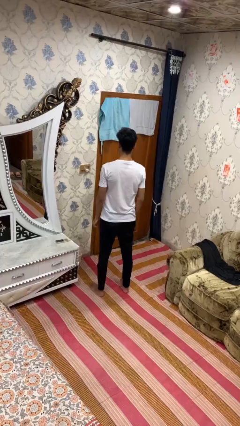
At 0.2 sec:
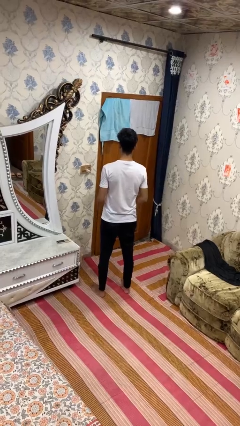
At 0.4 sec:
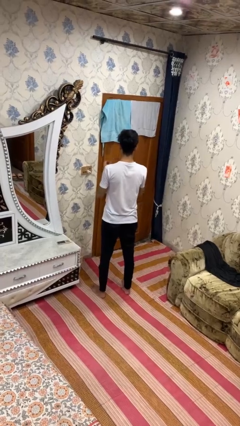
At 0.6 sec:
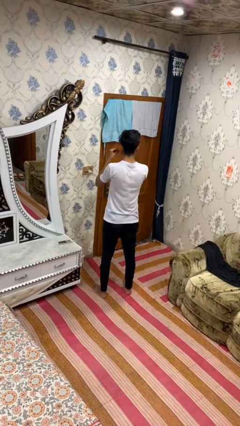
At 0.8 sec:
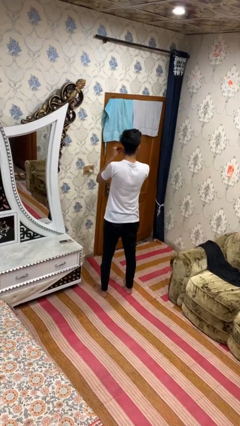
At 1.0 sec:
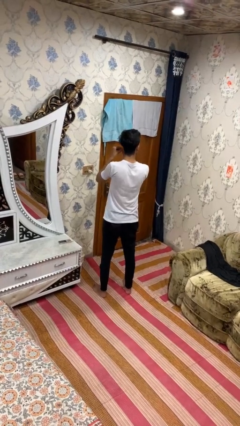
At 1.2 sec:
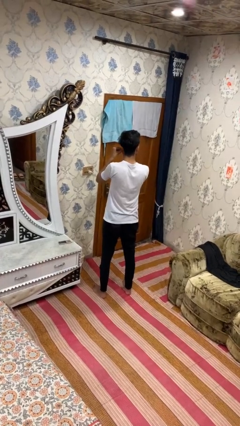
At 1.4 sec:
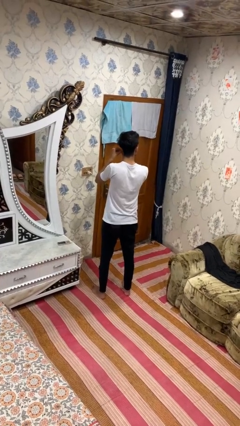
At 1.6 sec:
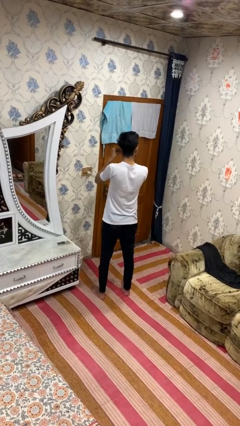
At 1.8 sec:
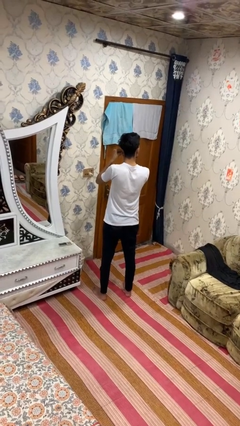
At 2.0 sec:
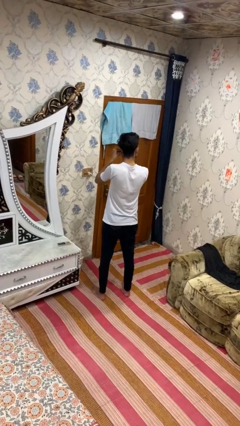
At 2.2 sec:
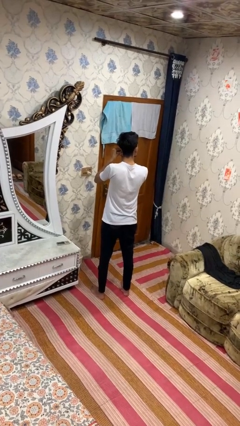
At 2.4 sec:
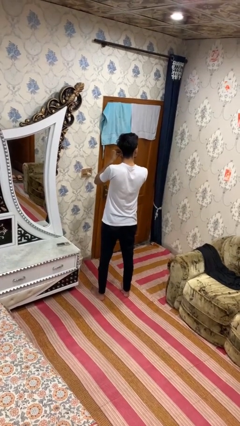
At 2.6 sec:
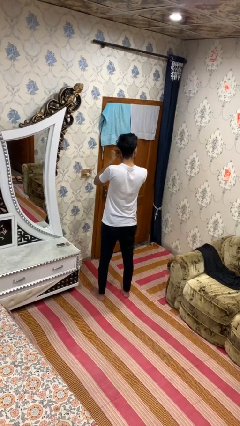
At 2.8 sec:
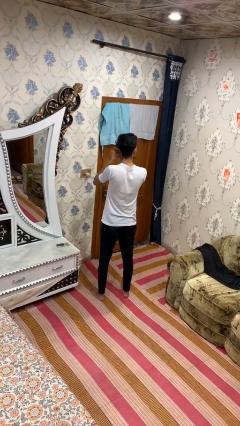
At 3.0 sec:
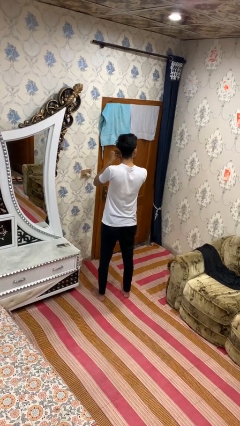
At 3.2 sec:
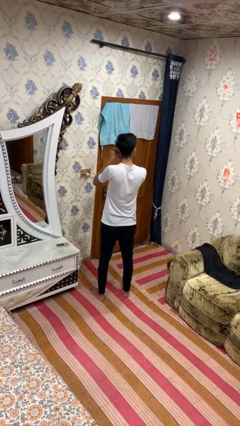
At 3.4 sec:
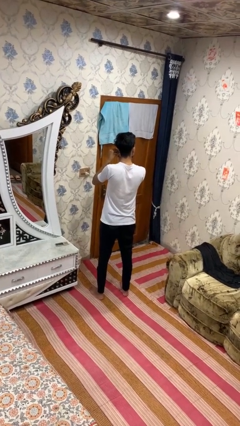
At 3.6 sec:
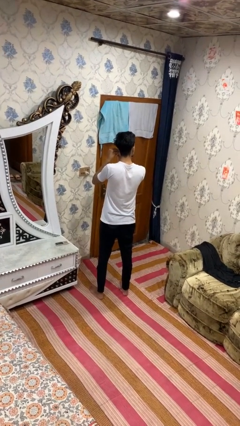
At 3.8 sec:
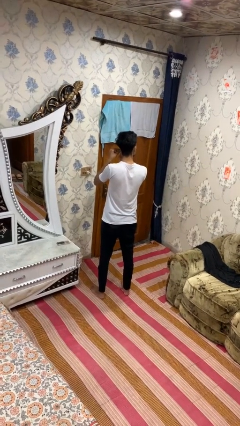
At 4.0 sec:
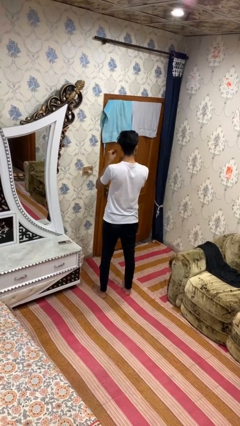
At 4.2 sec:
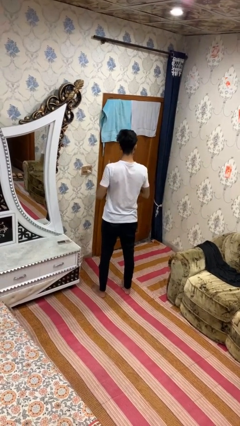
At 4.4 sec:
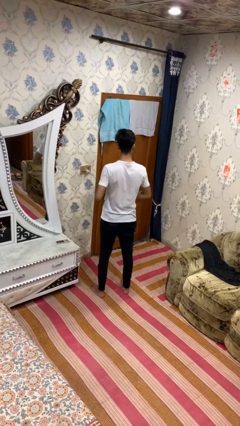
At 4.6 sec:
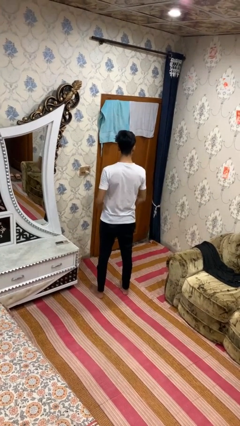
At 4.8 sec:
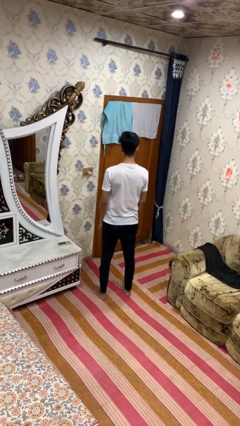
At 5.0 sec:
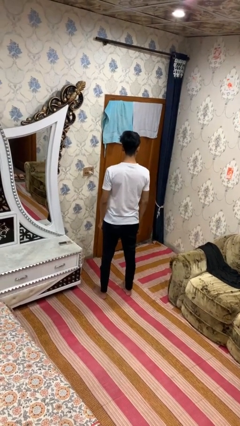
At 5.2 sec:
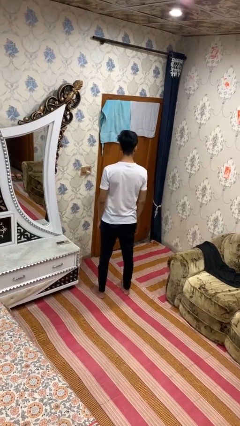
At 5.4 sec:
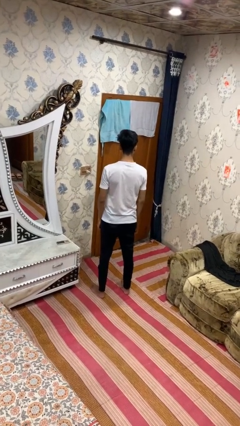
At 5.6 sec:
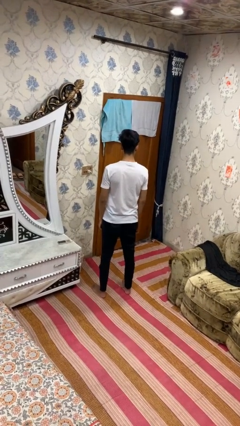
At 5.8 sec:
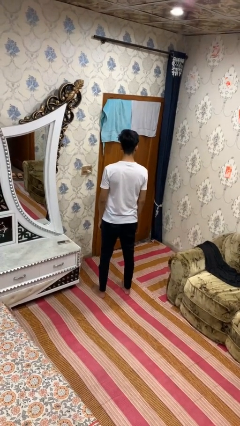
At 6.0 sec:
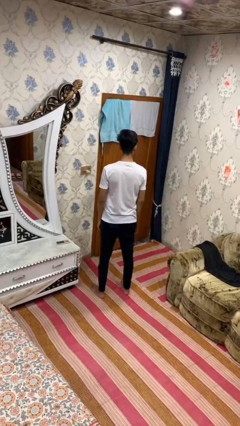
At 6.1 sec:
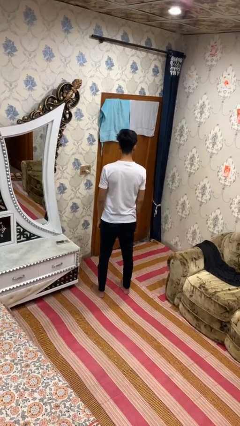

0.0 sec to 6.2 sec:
person puts on earrings

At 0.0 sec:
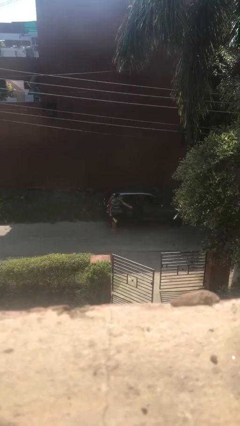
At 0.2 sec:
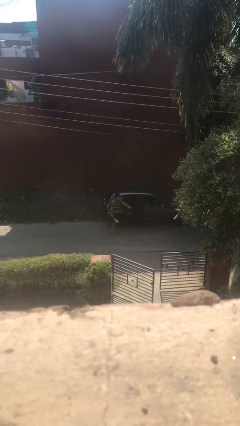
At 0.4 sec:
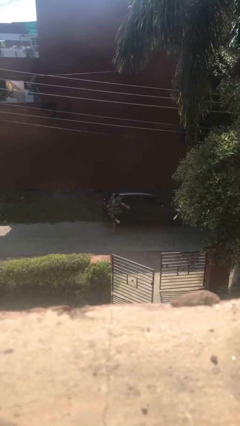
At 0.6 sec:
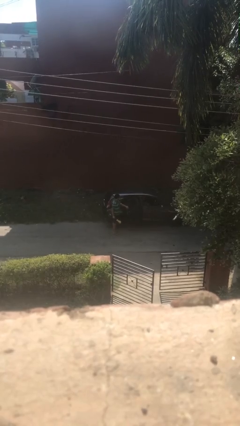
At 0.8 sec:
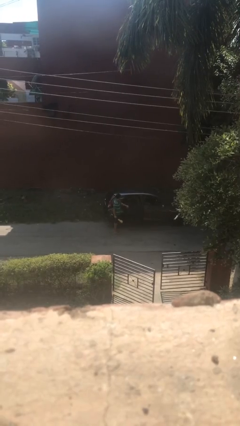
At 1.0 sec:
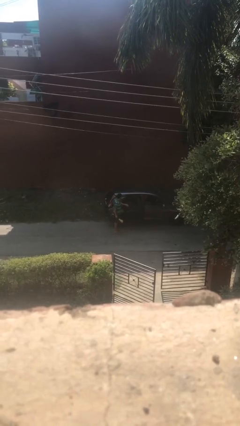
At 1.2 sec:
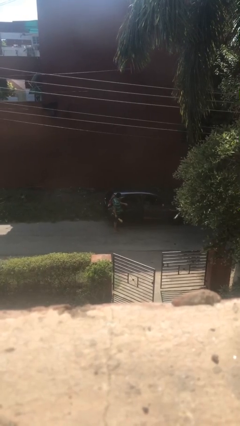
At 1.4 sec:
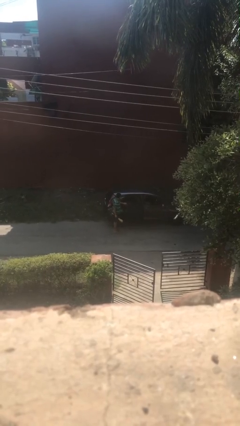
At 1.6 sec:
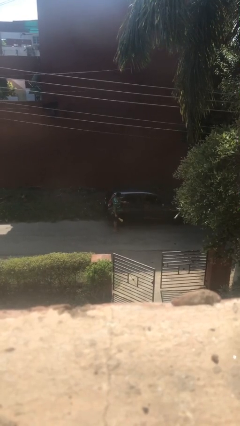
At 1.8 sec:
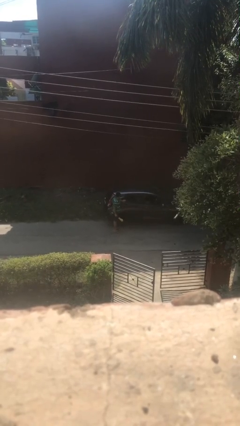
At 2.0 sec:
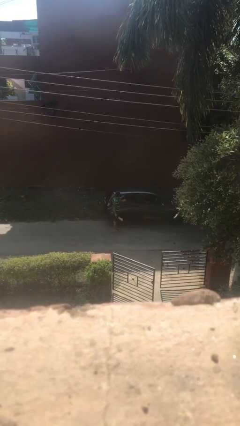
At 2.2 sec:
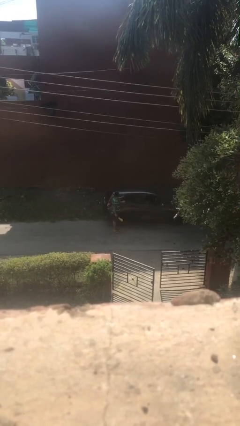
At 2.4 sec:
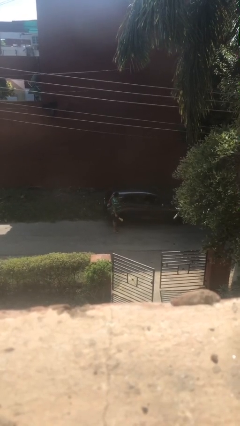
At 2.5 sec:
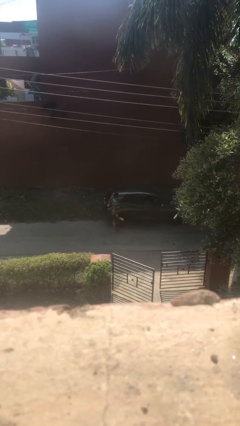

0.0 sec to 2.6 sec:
person closes car door

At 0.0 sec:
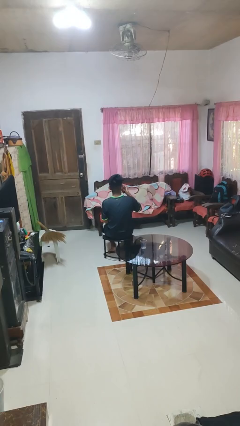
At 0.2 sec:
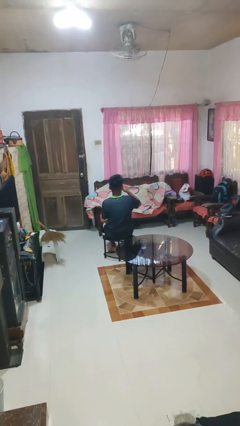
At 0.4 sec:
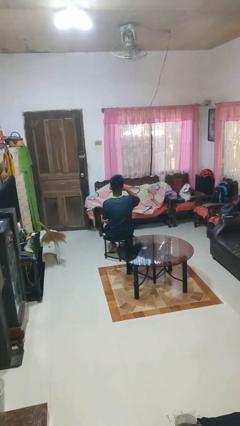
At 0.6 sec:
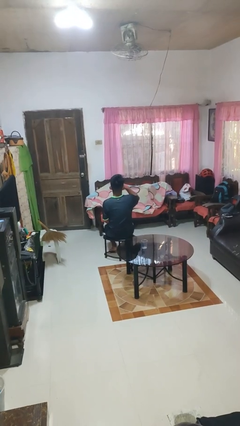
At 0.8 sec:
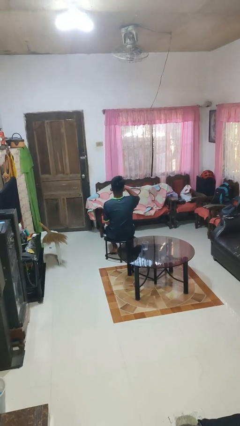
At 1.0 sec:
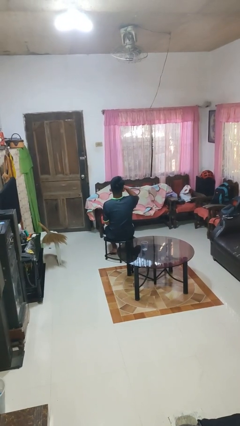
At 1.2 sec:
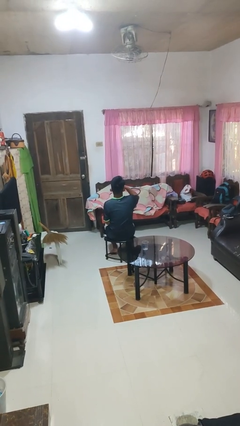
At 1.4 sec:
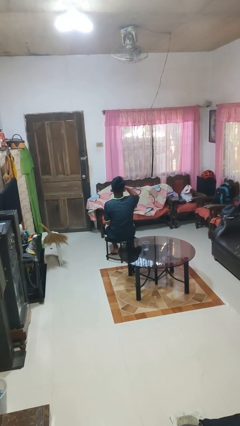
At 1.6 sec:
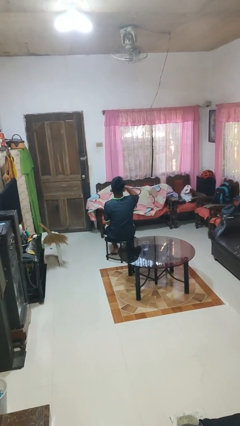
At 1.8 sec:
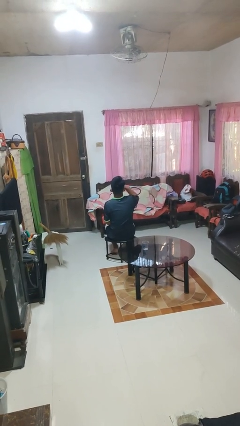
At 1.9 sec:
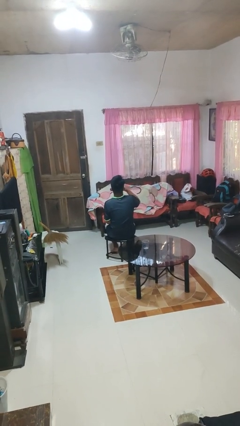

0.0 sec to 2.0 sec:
person drinks from beverage can

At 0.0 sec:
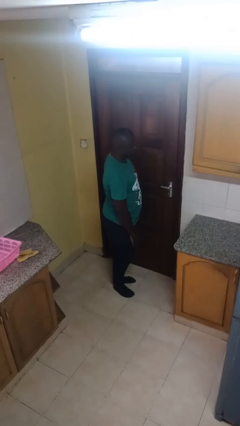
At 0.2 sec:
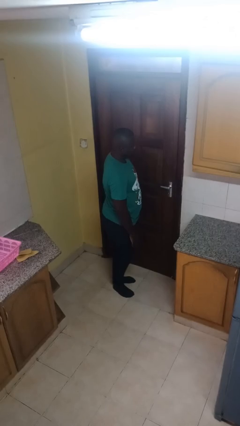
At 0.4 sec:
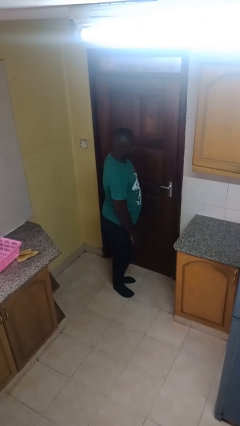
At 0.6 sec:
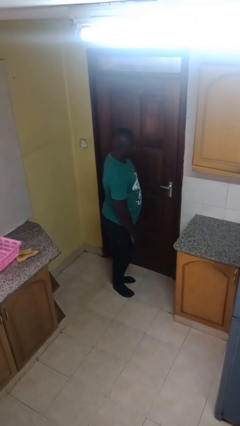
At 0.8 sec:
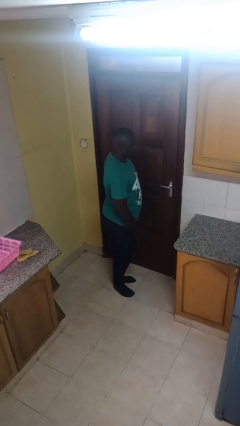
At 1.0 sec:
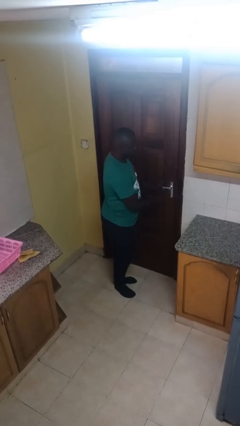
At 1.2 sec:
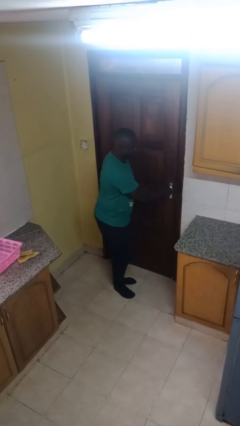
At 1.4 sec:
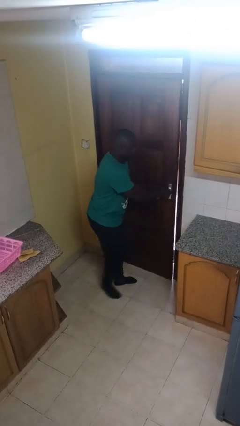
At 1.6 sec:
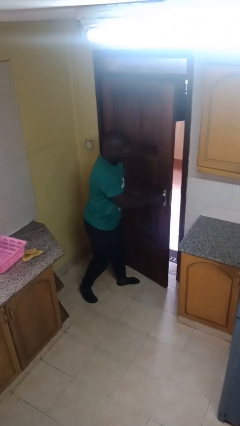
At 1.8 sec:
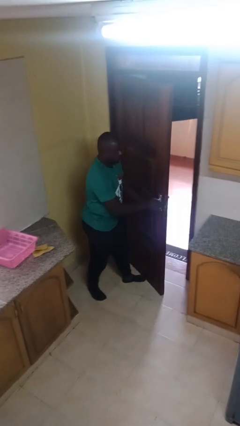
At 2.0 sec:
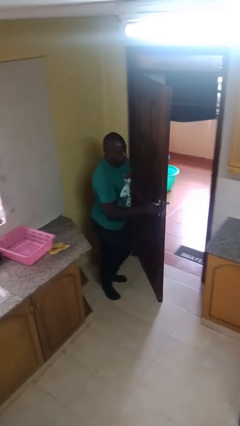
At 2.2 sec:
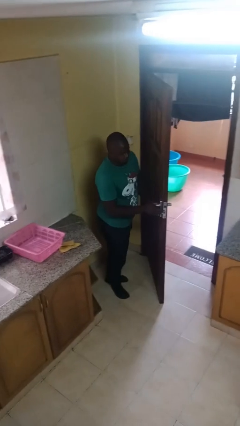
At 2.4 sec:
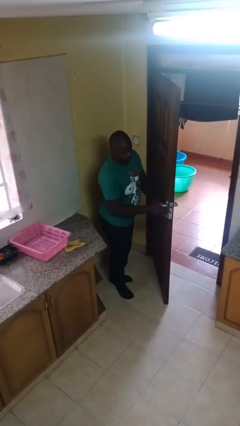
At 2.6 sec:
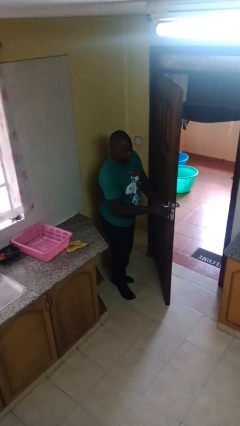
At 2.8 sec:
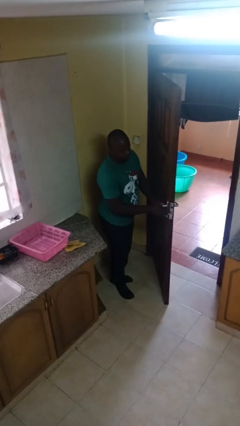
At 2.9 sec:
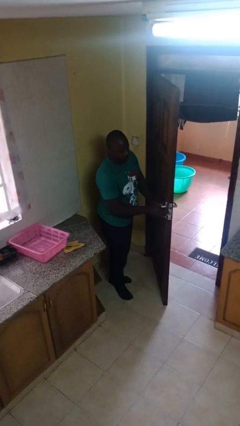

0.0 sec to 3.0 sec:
person opens facility door

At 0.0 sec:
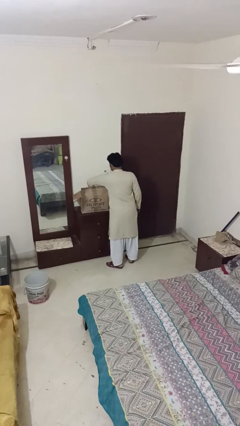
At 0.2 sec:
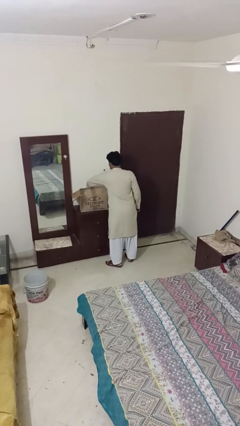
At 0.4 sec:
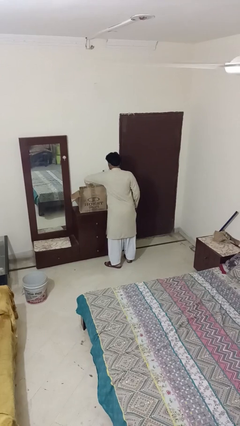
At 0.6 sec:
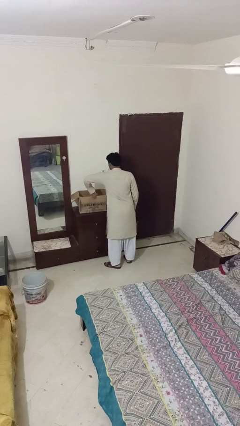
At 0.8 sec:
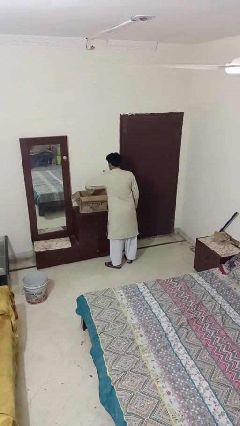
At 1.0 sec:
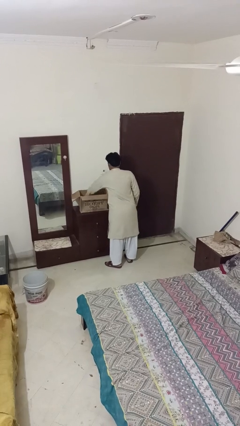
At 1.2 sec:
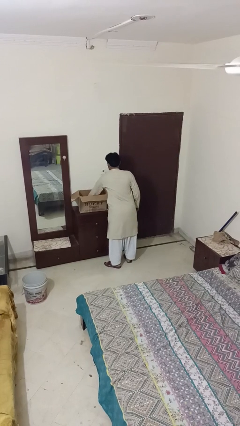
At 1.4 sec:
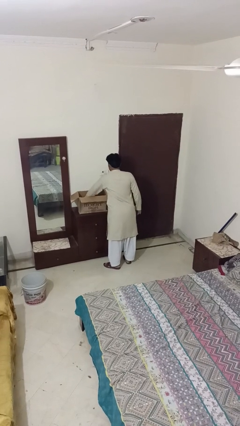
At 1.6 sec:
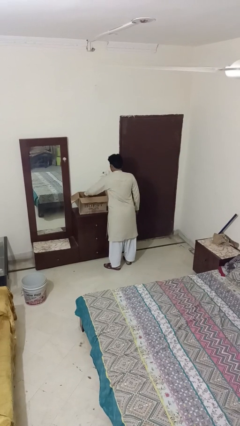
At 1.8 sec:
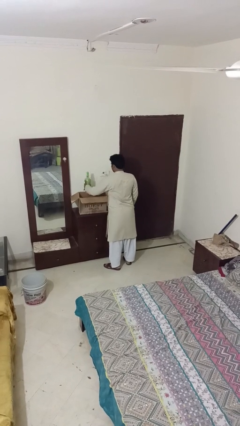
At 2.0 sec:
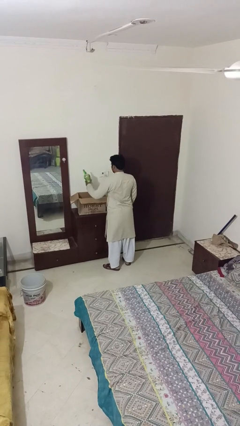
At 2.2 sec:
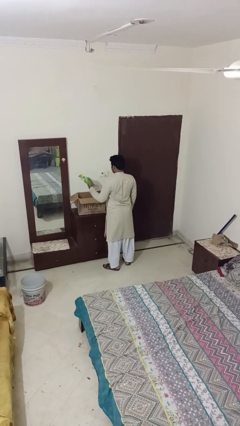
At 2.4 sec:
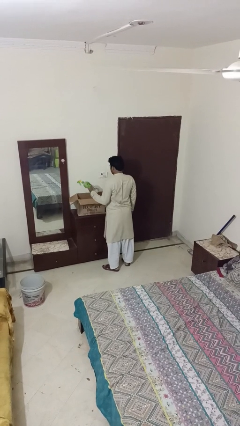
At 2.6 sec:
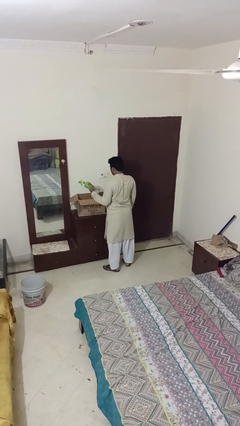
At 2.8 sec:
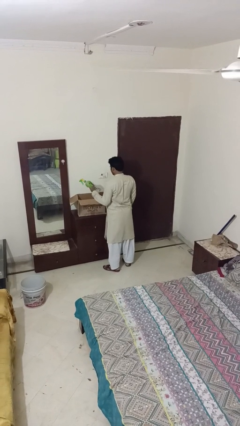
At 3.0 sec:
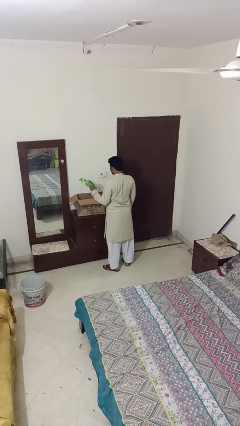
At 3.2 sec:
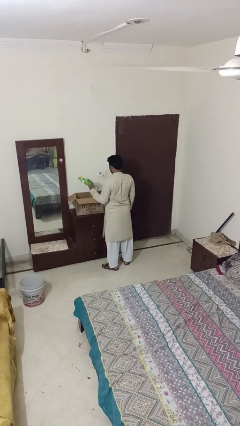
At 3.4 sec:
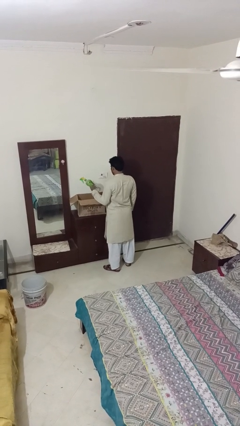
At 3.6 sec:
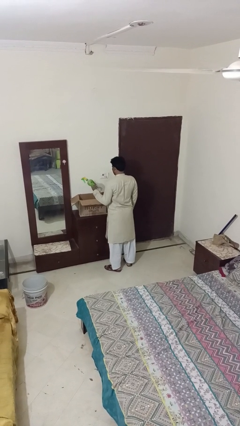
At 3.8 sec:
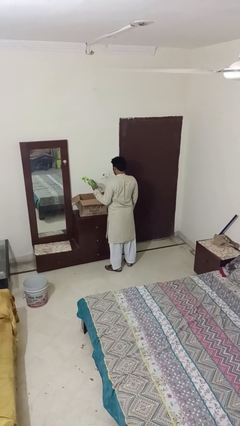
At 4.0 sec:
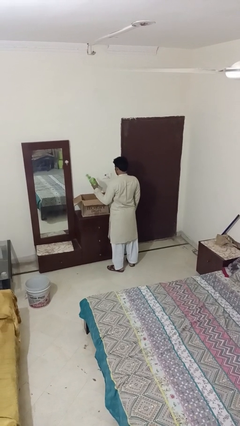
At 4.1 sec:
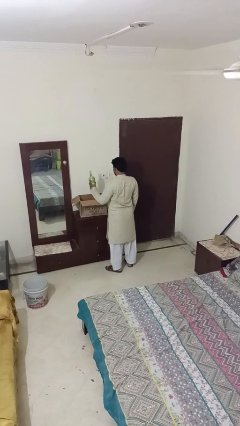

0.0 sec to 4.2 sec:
person takes object from box
